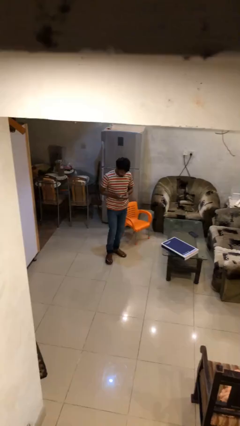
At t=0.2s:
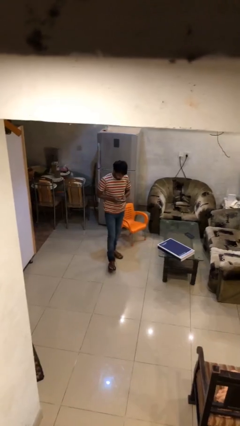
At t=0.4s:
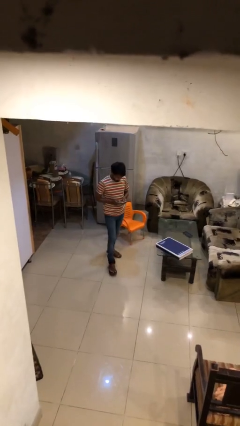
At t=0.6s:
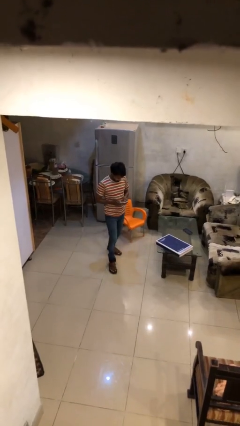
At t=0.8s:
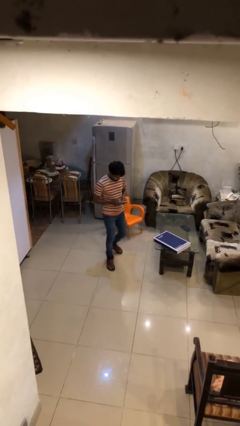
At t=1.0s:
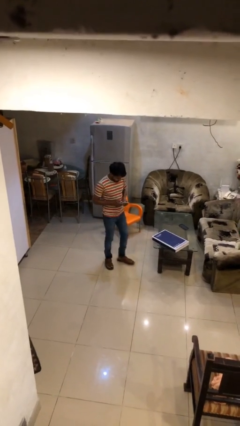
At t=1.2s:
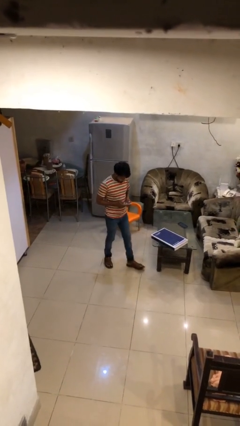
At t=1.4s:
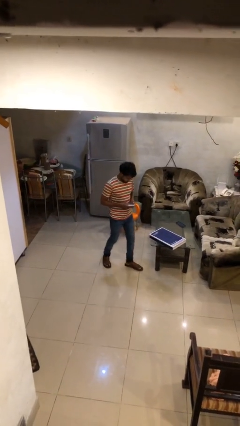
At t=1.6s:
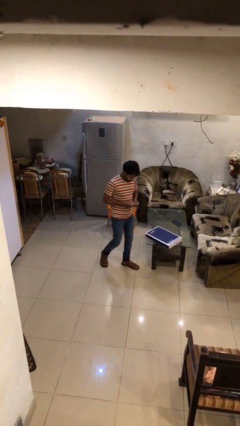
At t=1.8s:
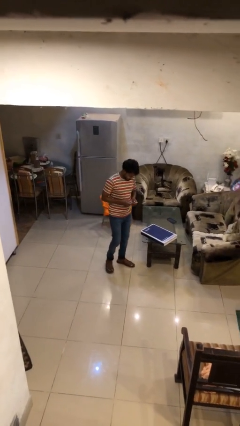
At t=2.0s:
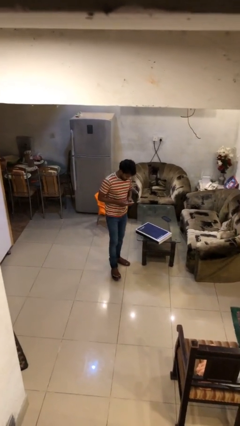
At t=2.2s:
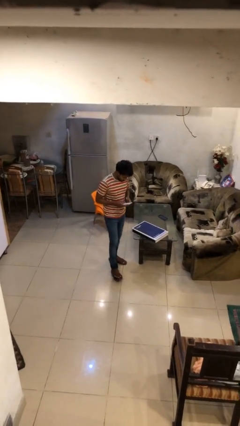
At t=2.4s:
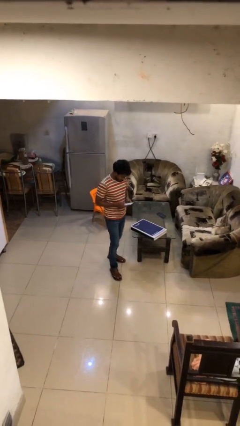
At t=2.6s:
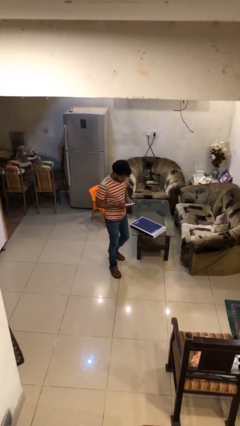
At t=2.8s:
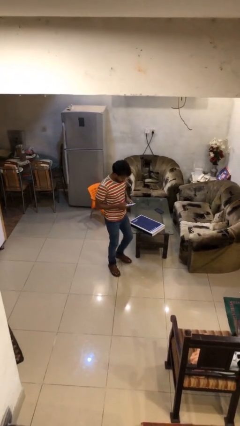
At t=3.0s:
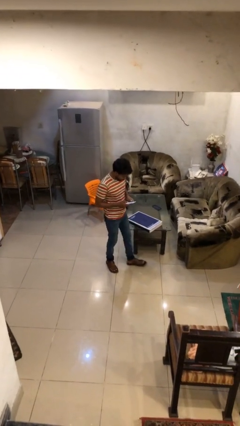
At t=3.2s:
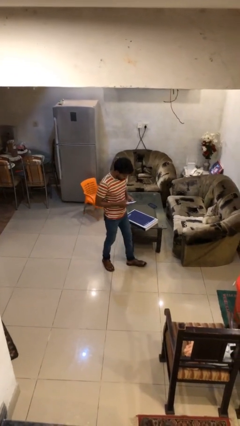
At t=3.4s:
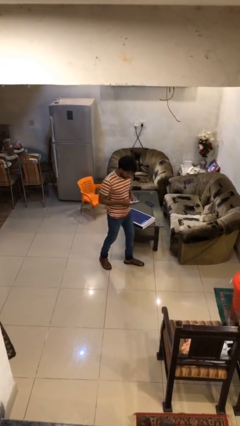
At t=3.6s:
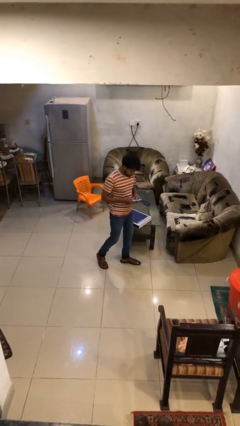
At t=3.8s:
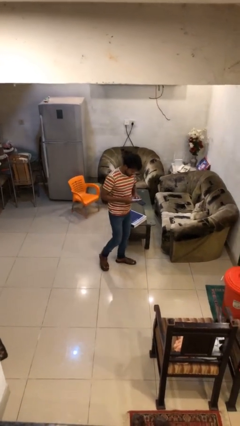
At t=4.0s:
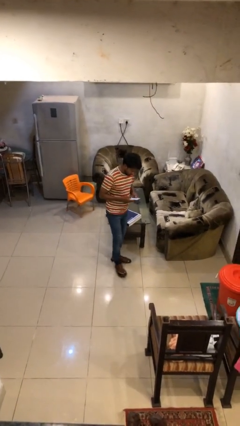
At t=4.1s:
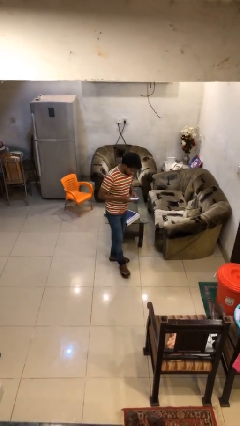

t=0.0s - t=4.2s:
person texts on phone

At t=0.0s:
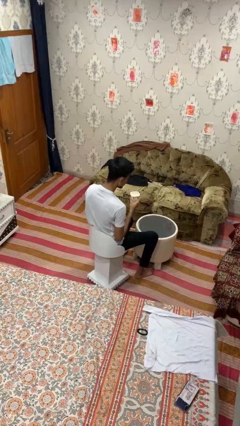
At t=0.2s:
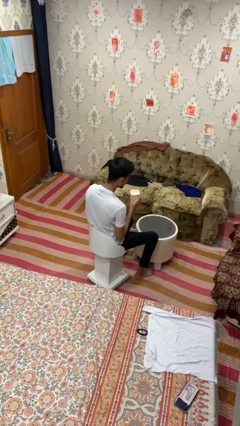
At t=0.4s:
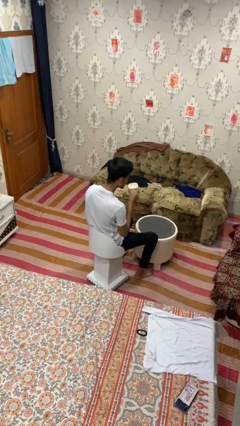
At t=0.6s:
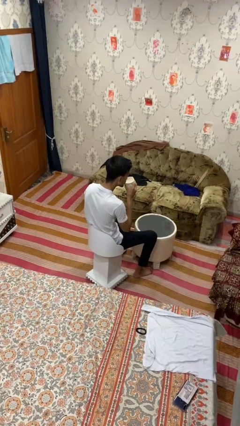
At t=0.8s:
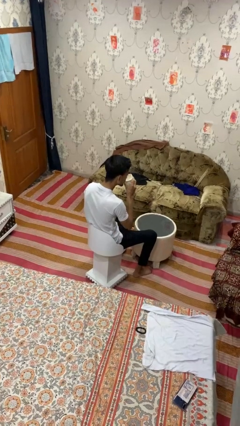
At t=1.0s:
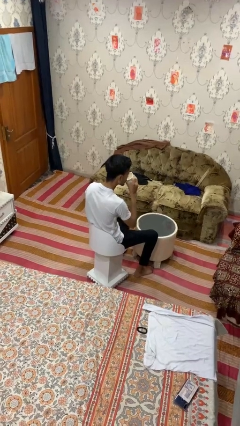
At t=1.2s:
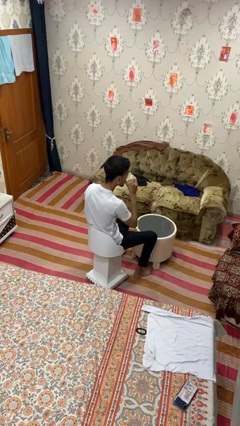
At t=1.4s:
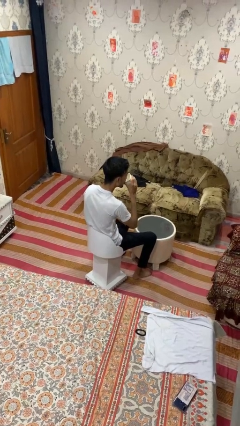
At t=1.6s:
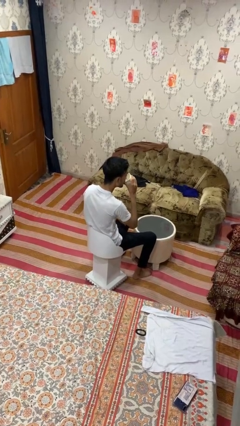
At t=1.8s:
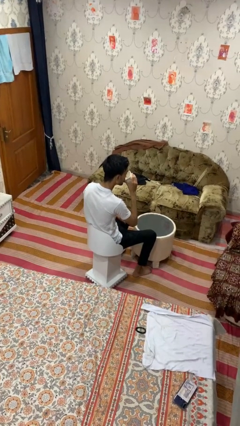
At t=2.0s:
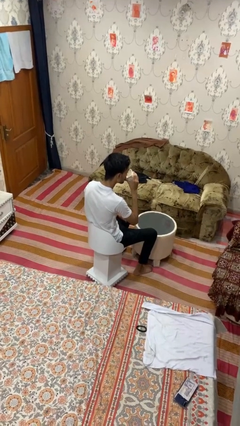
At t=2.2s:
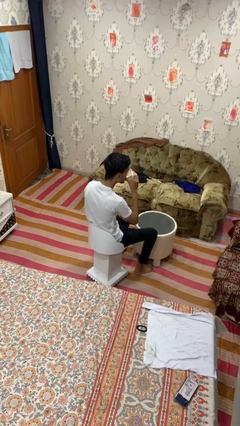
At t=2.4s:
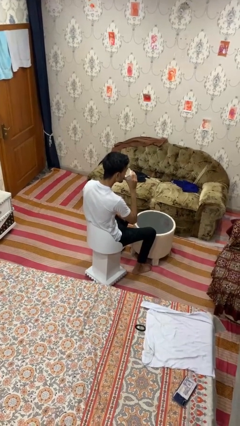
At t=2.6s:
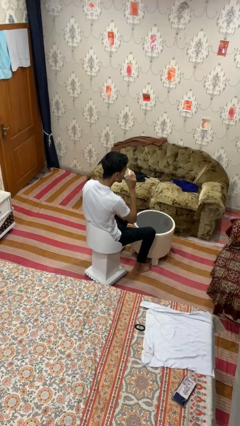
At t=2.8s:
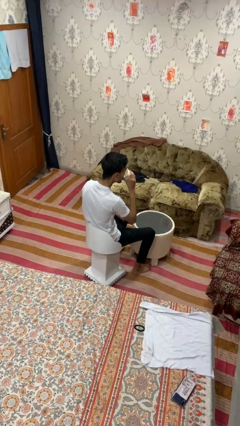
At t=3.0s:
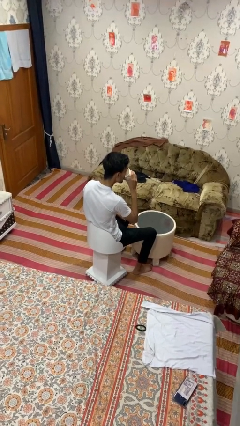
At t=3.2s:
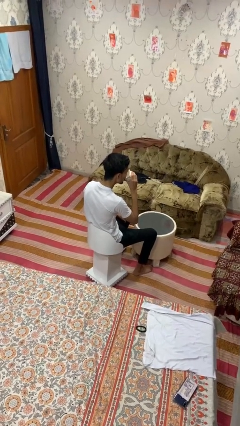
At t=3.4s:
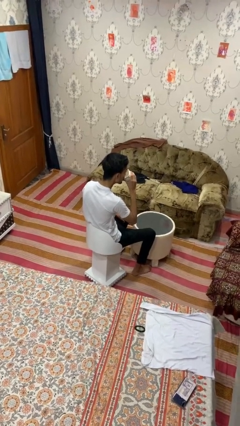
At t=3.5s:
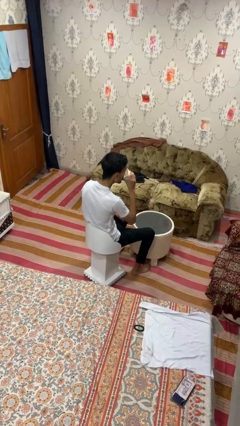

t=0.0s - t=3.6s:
person drinks from mug

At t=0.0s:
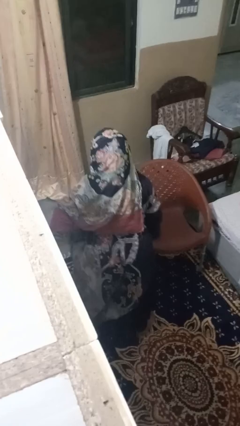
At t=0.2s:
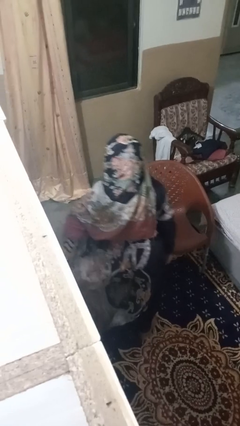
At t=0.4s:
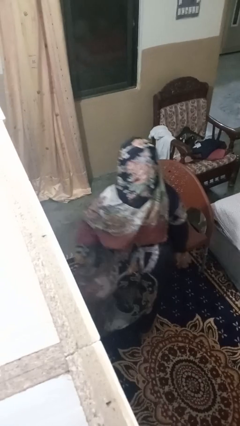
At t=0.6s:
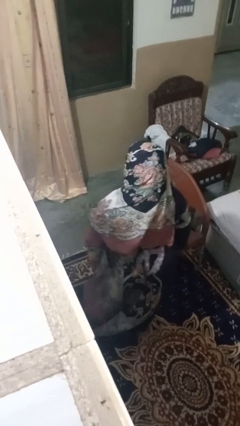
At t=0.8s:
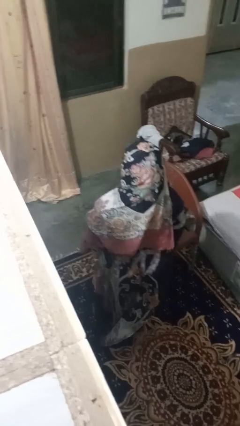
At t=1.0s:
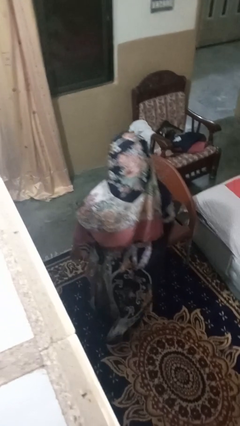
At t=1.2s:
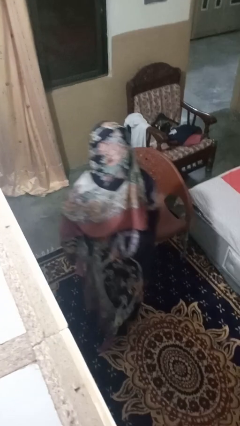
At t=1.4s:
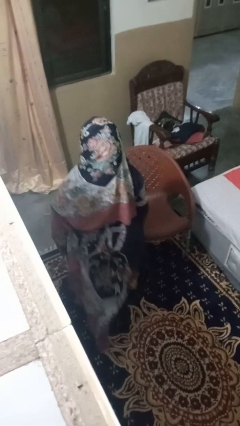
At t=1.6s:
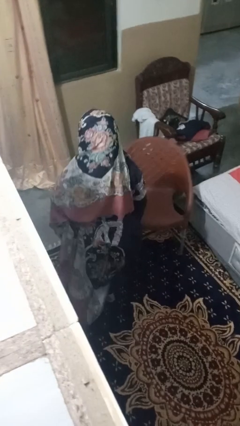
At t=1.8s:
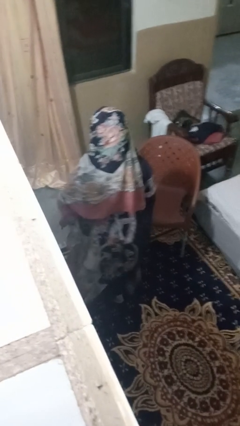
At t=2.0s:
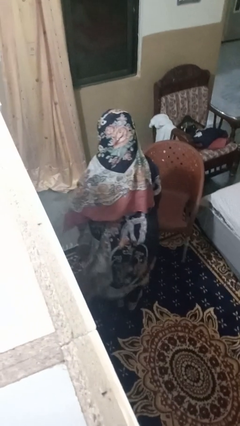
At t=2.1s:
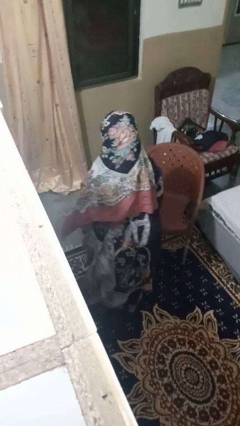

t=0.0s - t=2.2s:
person trips on object on floor

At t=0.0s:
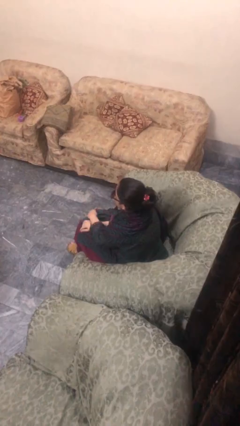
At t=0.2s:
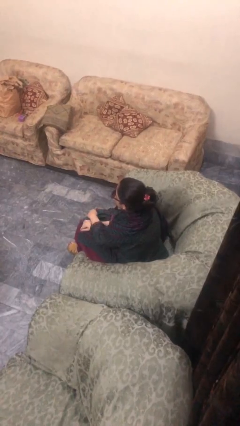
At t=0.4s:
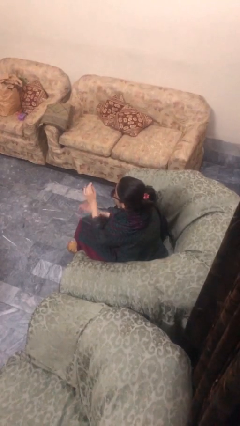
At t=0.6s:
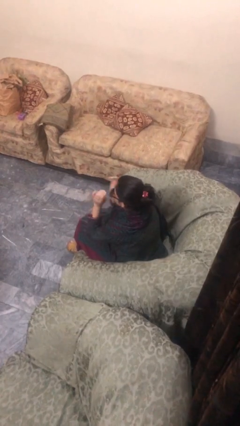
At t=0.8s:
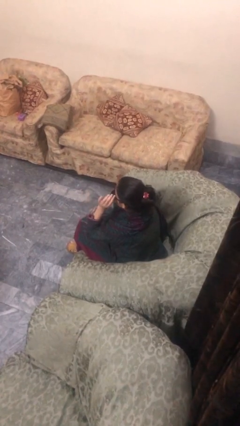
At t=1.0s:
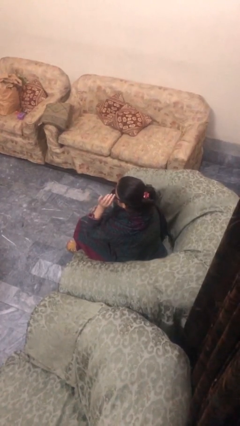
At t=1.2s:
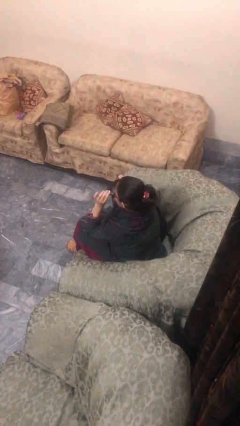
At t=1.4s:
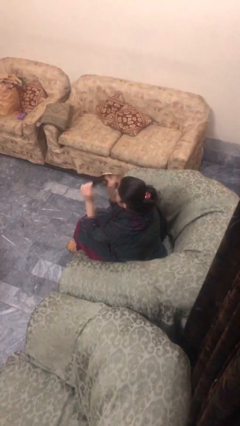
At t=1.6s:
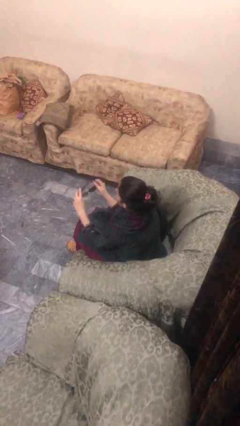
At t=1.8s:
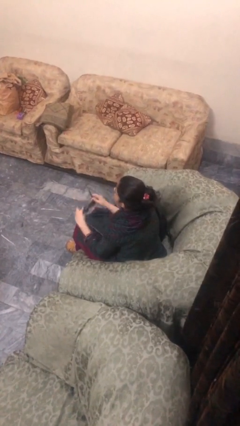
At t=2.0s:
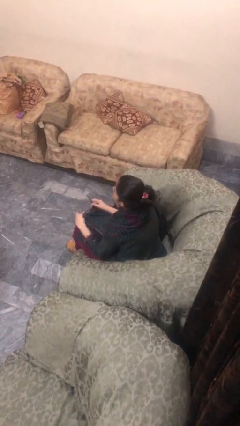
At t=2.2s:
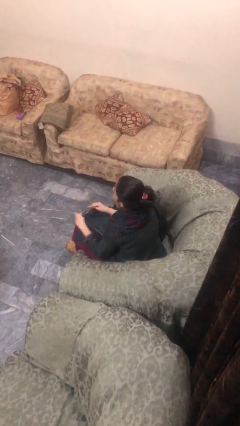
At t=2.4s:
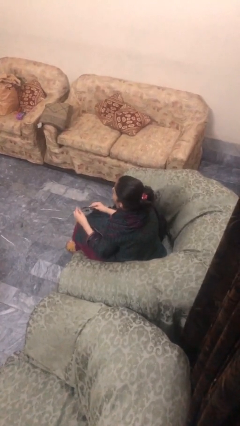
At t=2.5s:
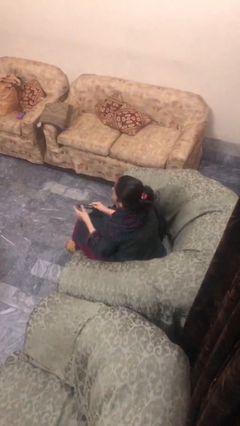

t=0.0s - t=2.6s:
person takes off sunglasses

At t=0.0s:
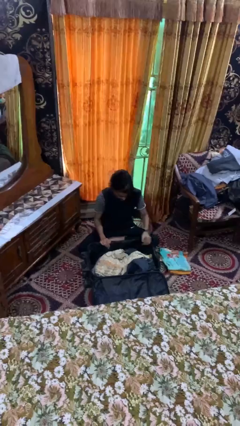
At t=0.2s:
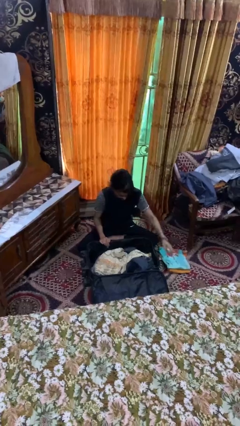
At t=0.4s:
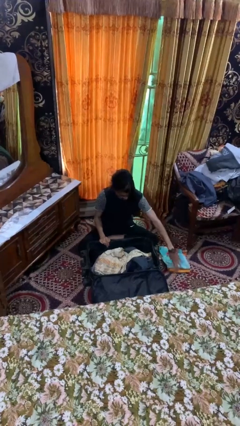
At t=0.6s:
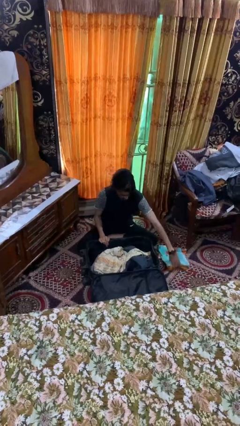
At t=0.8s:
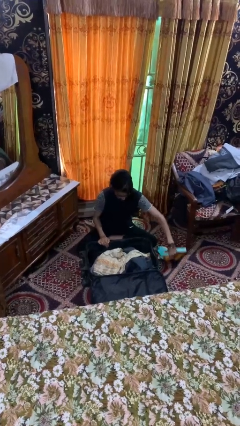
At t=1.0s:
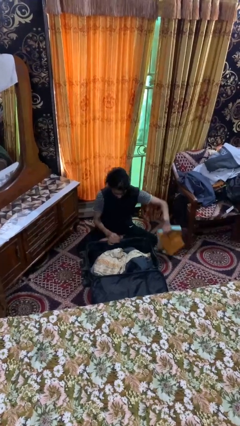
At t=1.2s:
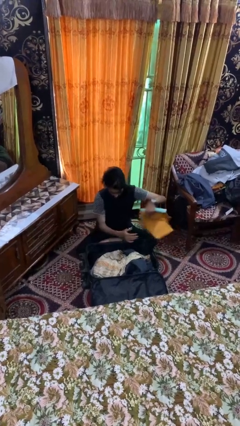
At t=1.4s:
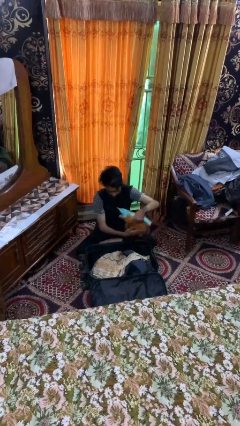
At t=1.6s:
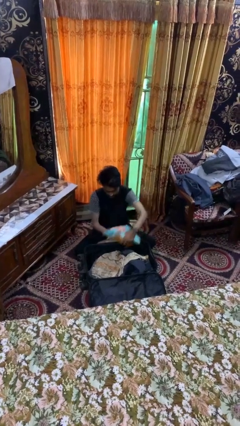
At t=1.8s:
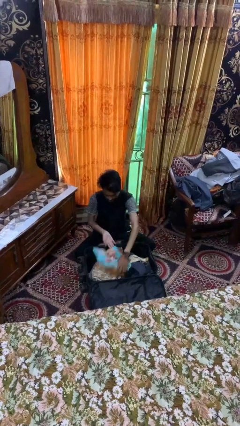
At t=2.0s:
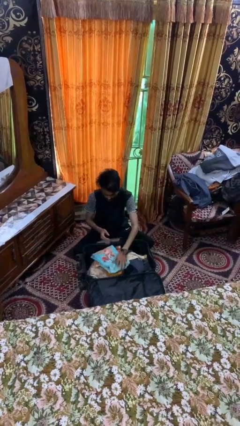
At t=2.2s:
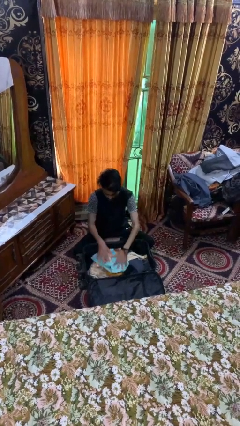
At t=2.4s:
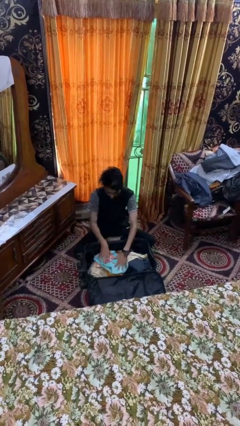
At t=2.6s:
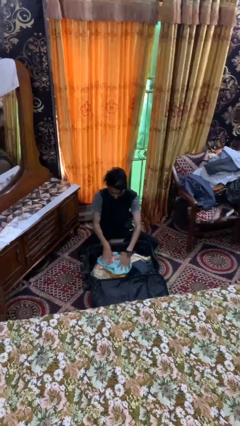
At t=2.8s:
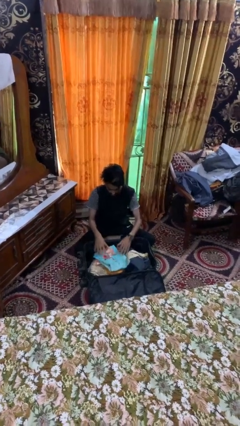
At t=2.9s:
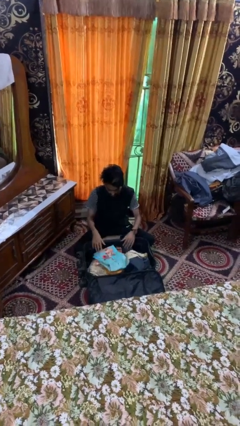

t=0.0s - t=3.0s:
person loads clothes into suitcase

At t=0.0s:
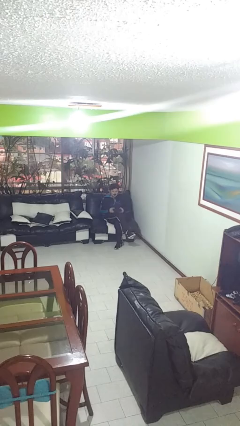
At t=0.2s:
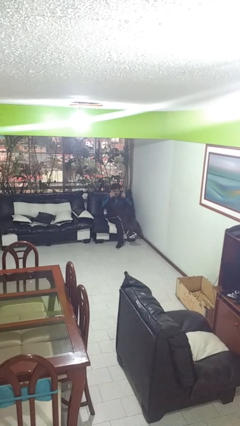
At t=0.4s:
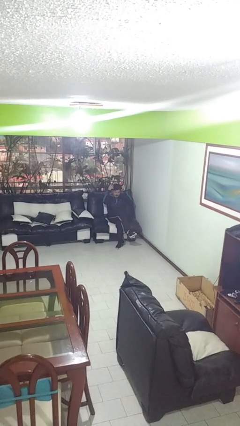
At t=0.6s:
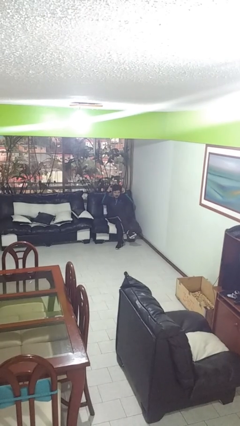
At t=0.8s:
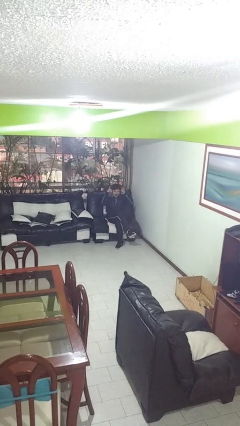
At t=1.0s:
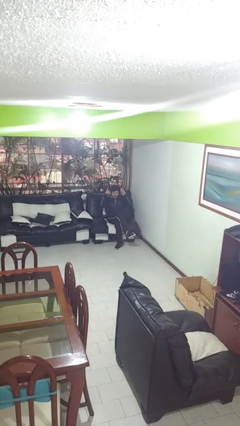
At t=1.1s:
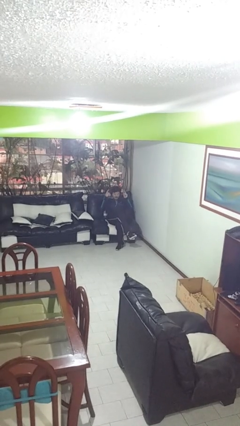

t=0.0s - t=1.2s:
person puts on headphones
